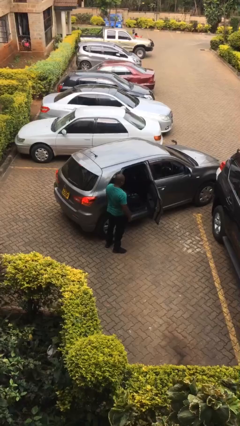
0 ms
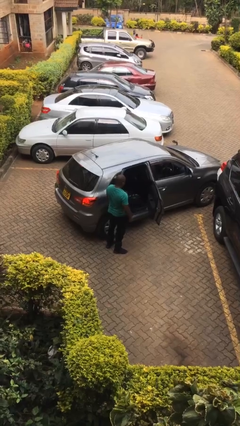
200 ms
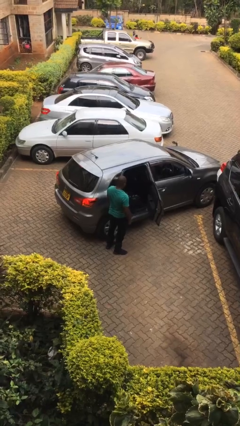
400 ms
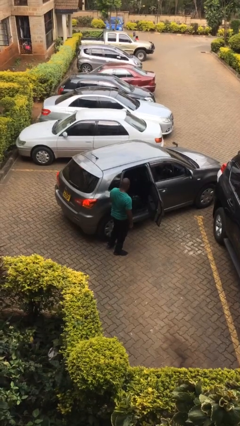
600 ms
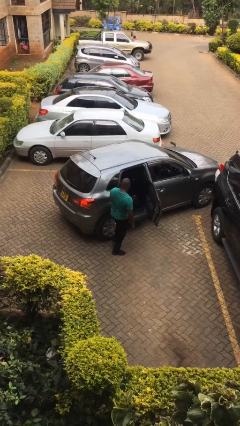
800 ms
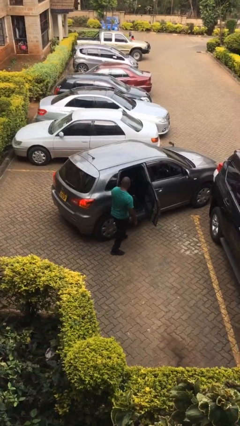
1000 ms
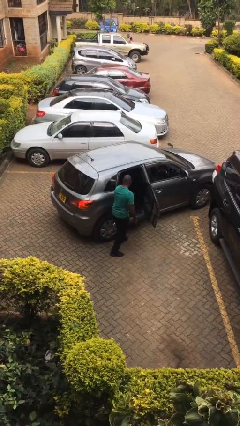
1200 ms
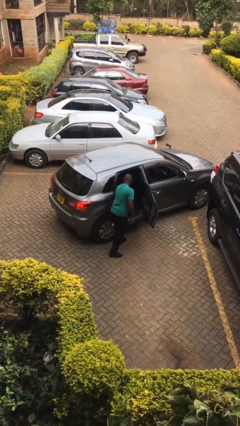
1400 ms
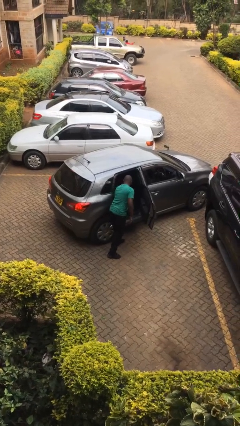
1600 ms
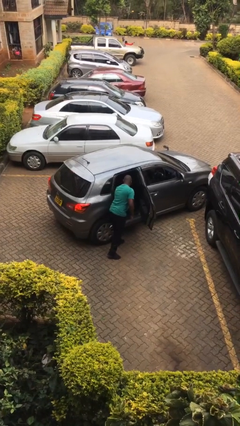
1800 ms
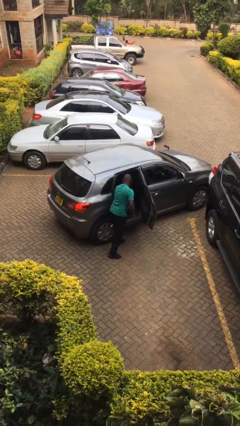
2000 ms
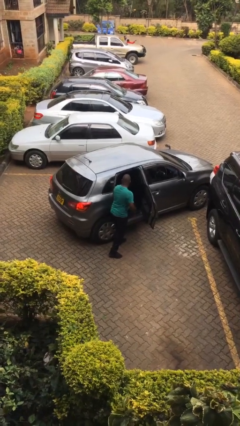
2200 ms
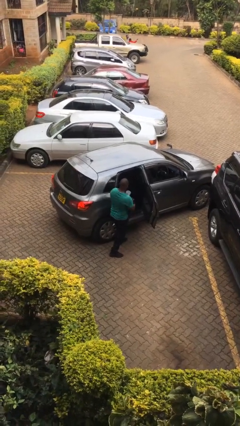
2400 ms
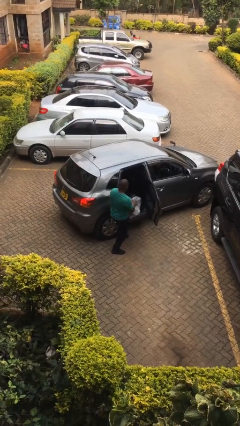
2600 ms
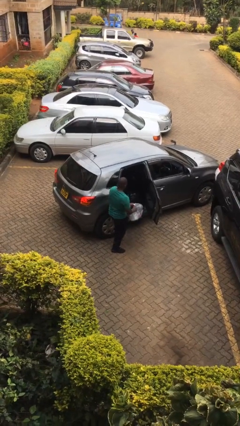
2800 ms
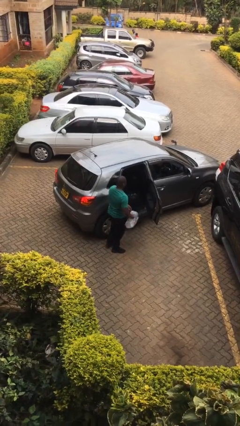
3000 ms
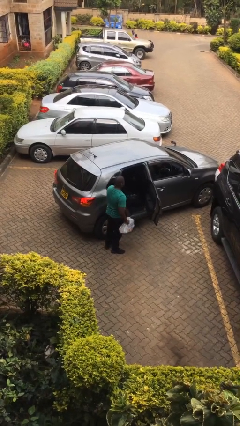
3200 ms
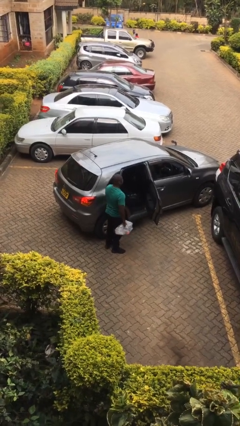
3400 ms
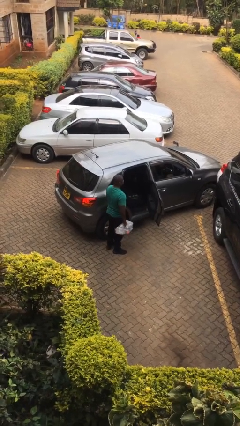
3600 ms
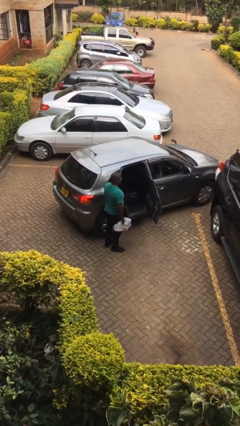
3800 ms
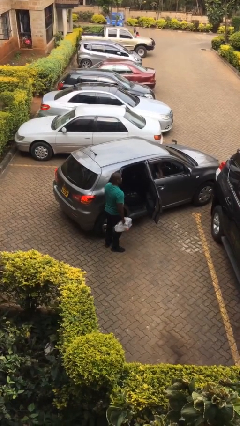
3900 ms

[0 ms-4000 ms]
person unloads car

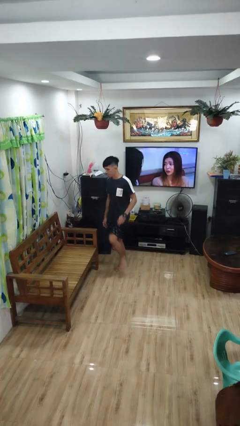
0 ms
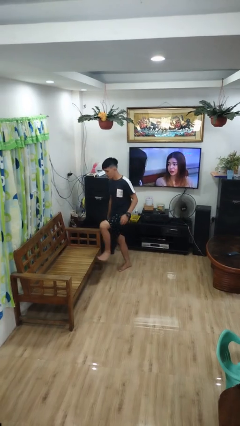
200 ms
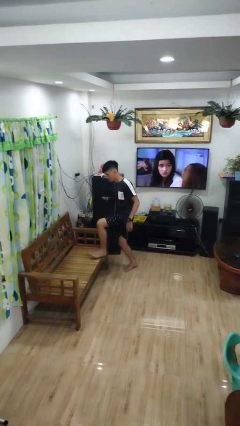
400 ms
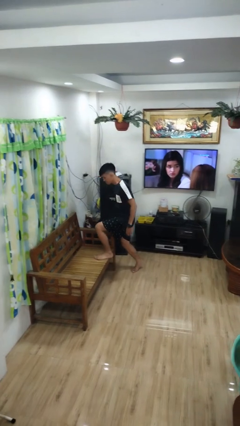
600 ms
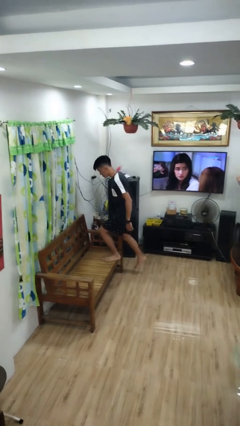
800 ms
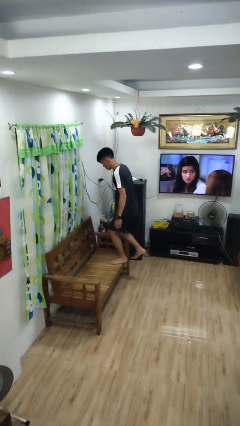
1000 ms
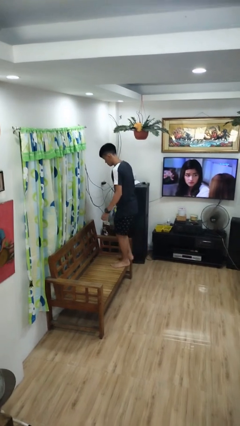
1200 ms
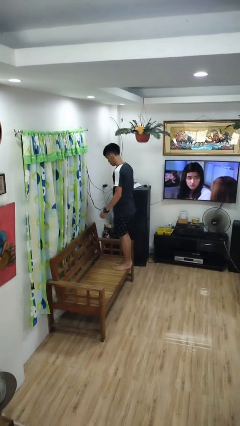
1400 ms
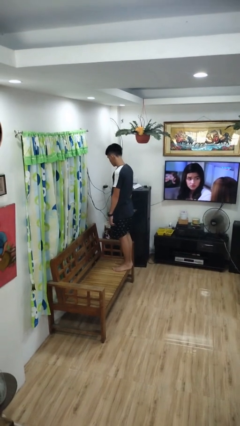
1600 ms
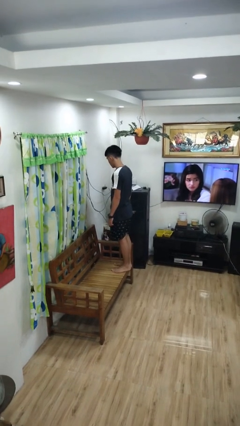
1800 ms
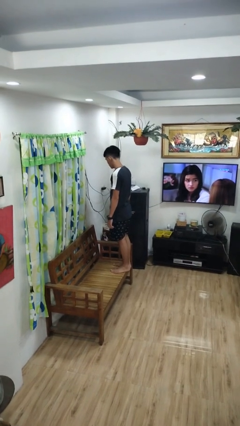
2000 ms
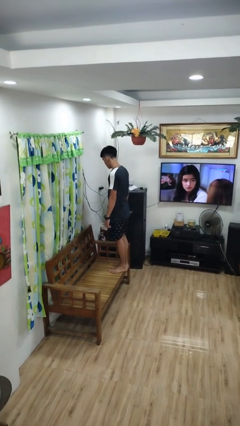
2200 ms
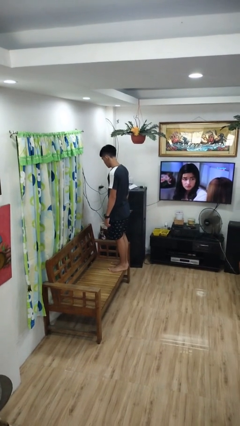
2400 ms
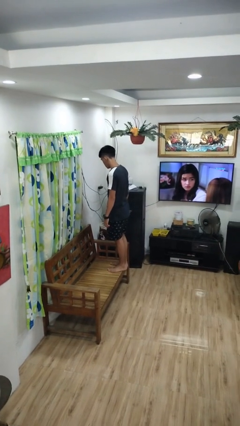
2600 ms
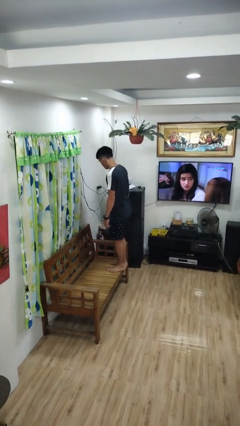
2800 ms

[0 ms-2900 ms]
person climbs on couch

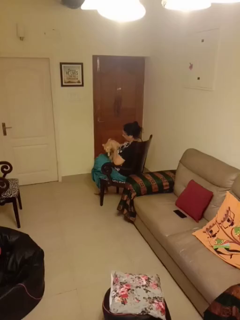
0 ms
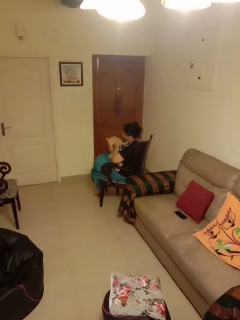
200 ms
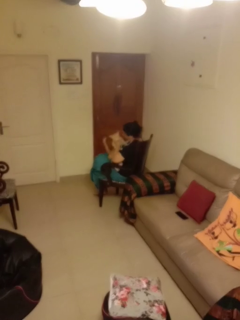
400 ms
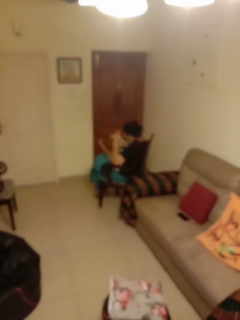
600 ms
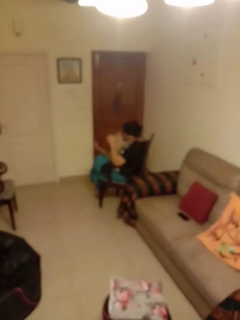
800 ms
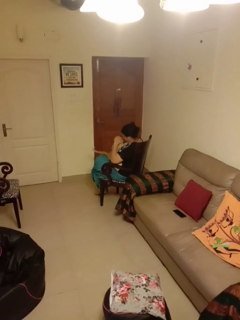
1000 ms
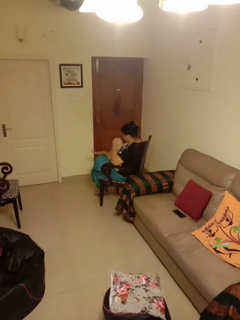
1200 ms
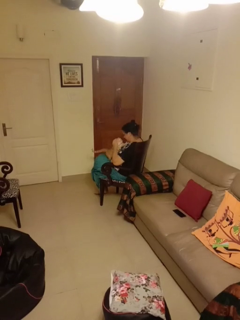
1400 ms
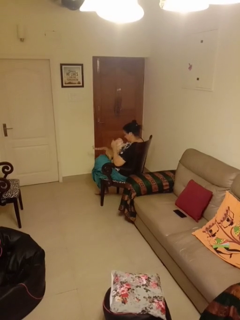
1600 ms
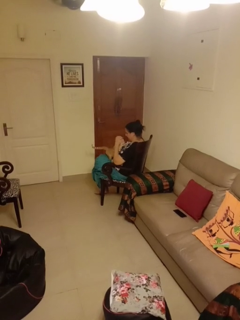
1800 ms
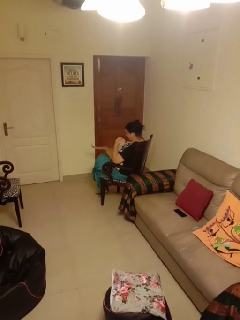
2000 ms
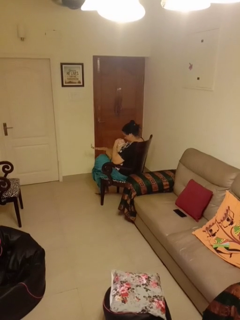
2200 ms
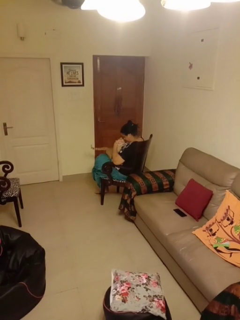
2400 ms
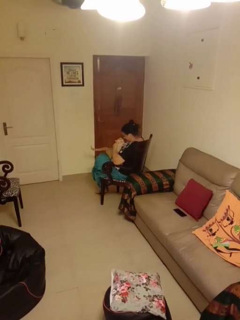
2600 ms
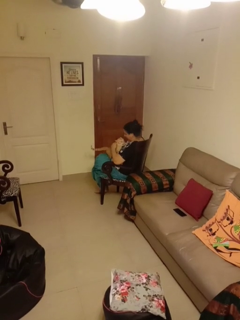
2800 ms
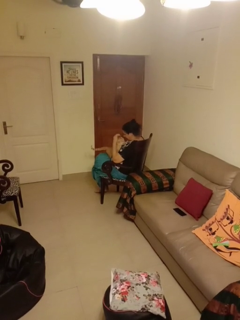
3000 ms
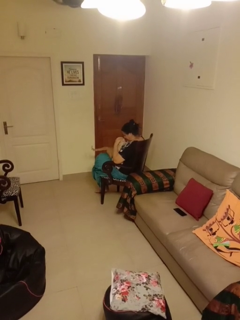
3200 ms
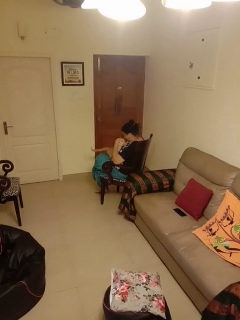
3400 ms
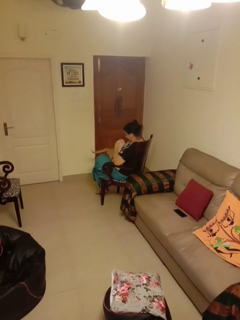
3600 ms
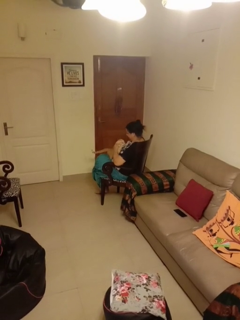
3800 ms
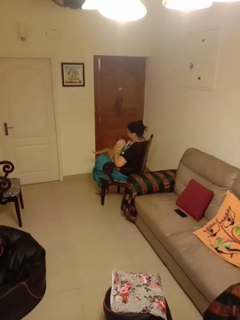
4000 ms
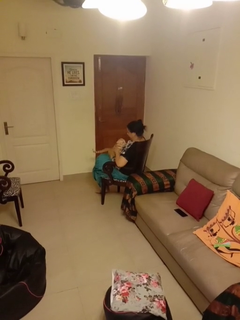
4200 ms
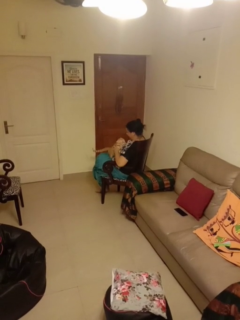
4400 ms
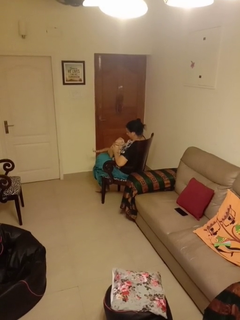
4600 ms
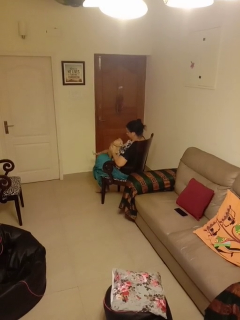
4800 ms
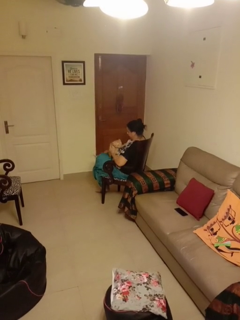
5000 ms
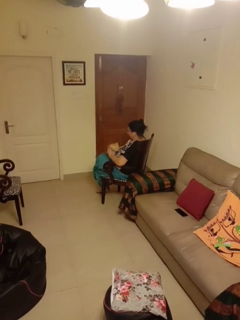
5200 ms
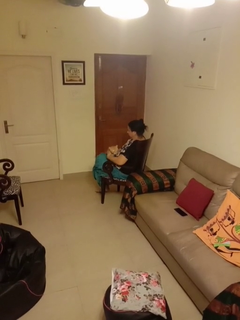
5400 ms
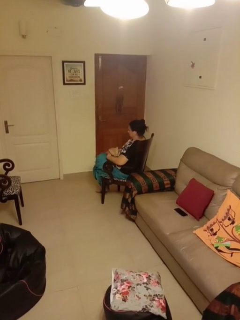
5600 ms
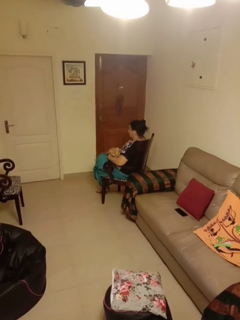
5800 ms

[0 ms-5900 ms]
person hugs cat

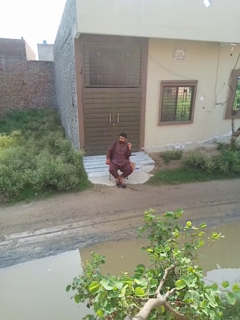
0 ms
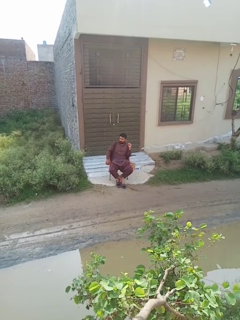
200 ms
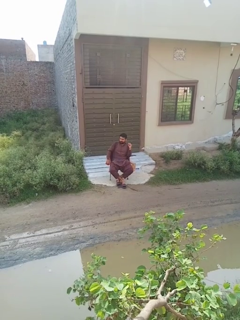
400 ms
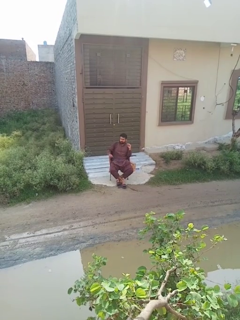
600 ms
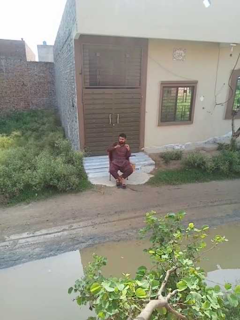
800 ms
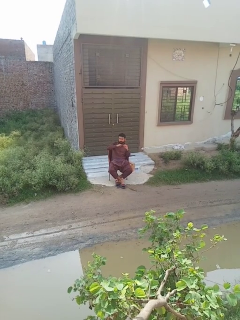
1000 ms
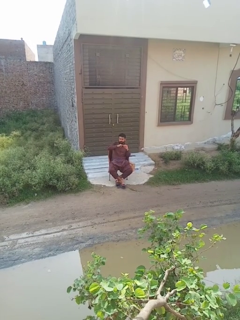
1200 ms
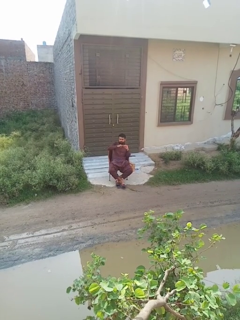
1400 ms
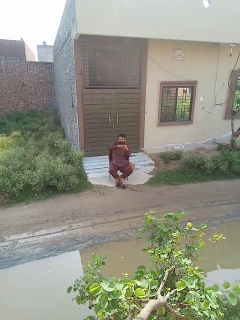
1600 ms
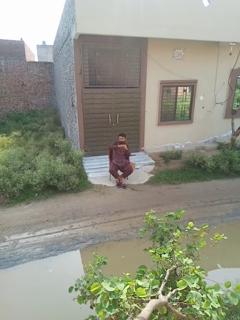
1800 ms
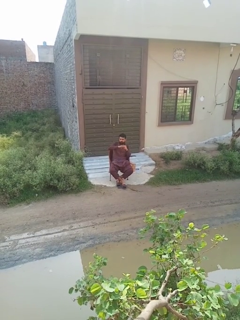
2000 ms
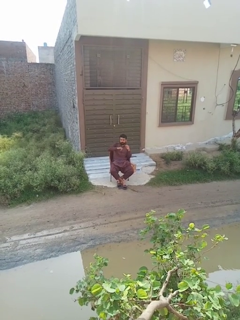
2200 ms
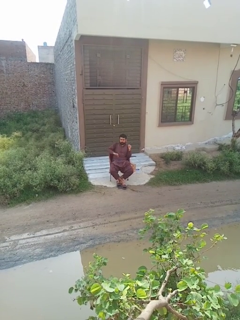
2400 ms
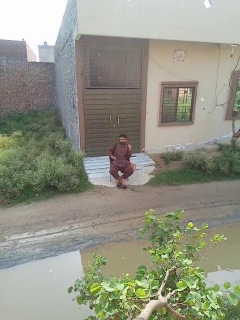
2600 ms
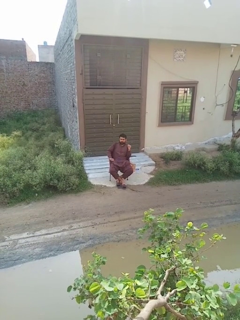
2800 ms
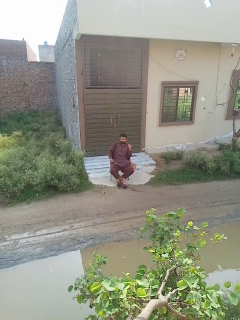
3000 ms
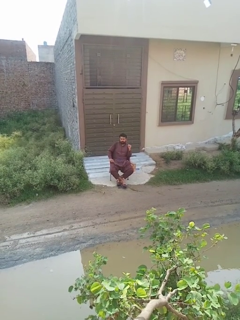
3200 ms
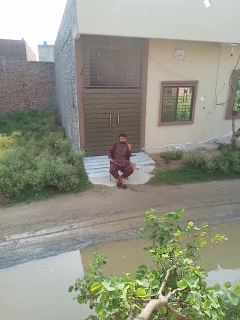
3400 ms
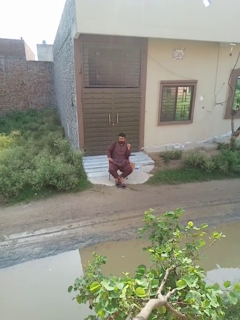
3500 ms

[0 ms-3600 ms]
person puts on ring

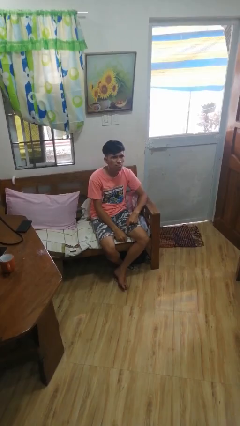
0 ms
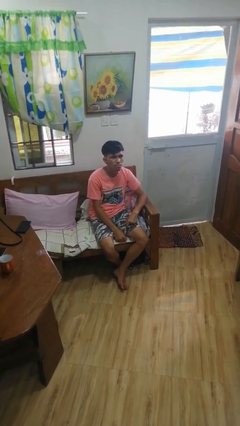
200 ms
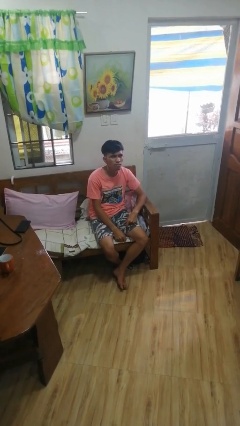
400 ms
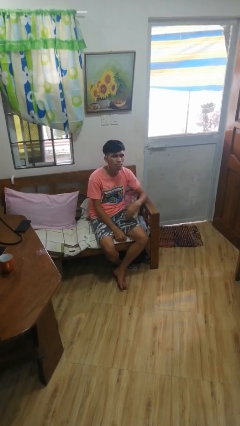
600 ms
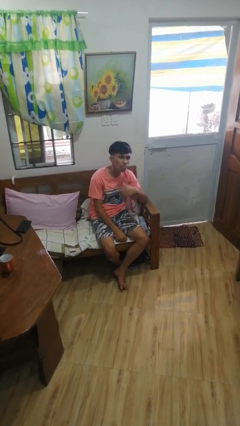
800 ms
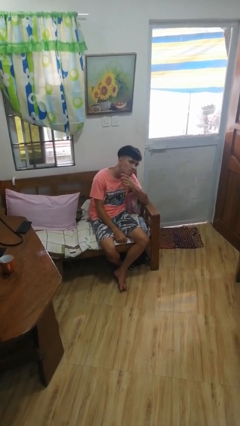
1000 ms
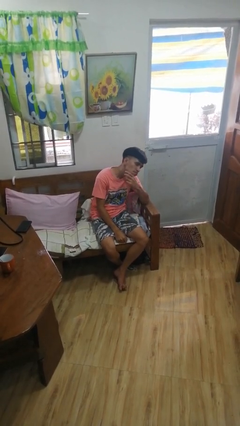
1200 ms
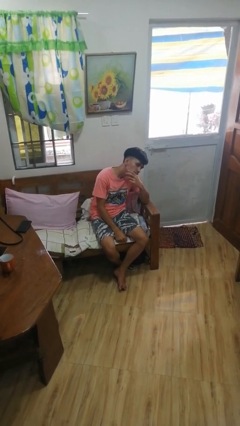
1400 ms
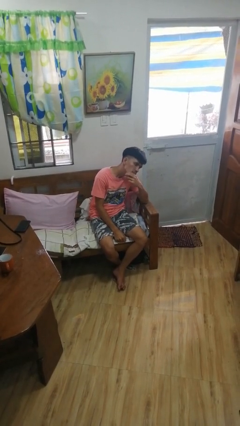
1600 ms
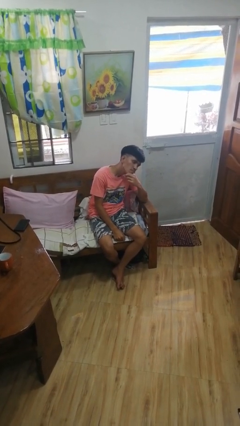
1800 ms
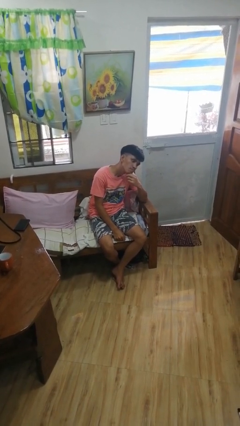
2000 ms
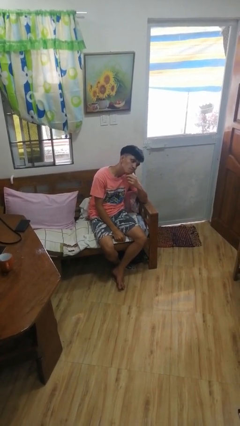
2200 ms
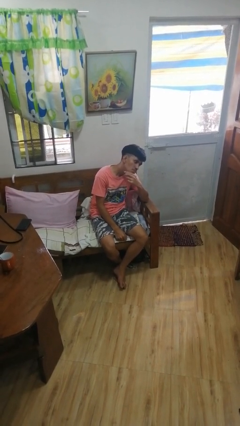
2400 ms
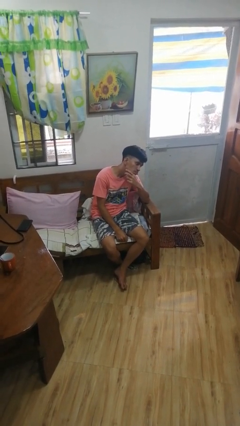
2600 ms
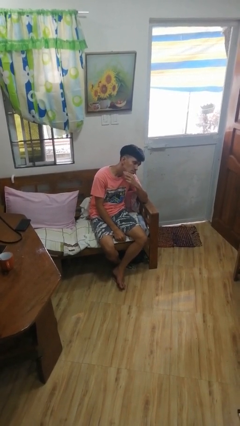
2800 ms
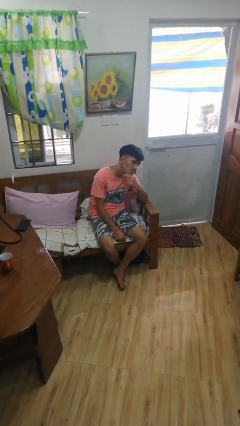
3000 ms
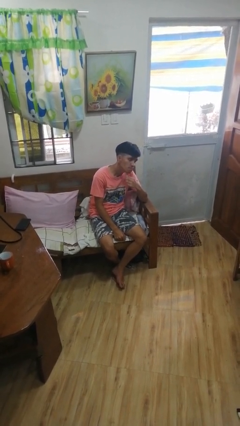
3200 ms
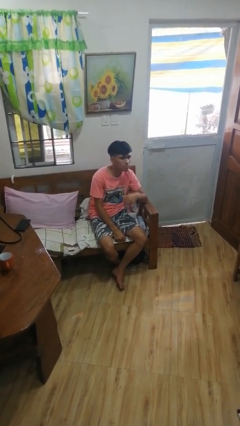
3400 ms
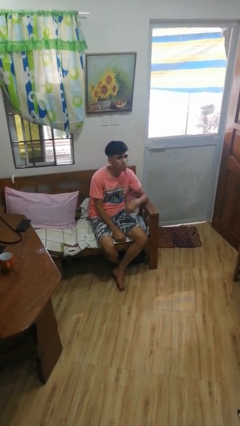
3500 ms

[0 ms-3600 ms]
person strokes chin
